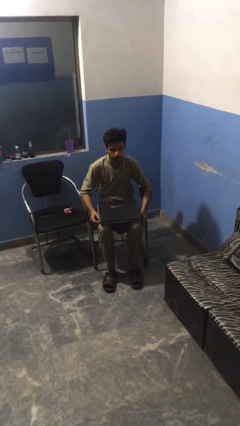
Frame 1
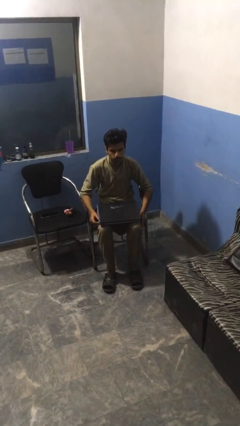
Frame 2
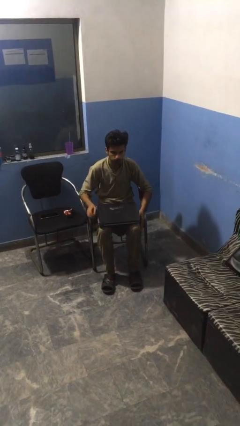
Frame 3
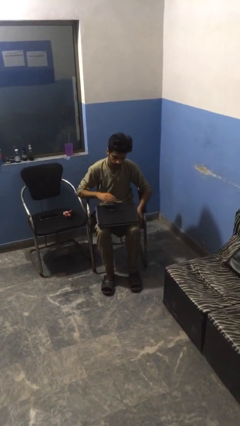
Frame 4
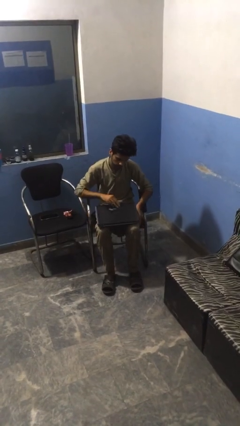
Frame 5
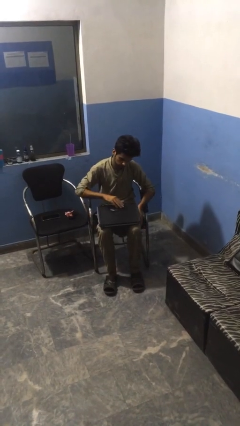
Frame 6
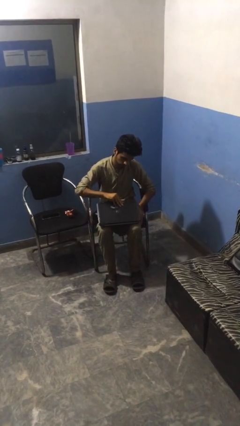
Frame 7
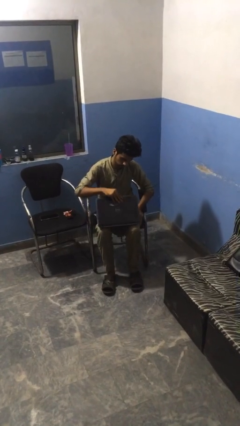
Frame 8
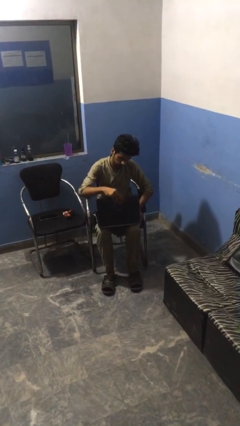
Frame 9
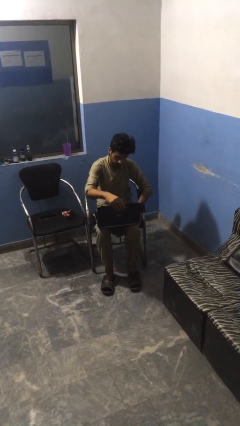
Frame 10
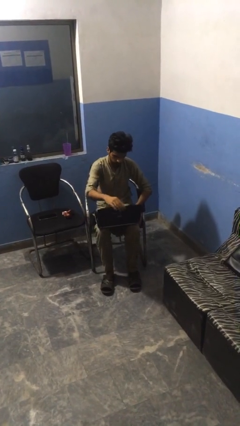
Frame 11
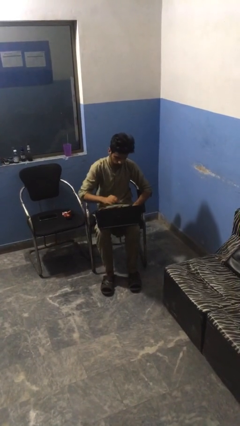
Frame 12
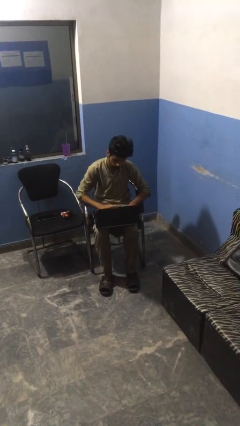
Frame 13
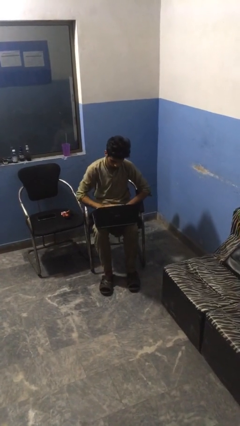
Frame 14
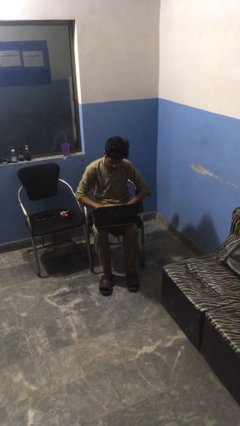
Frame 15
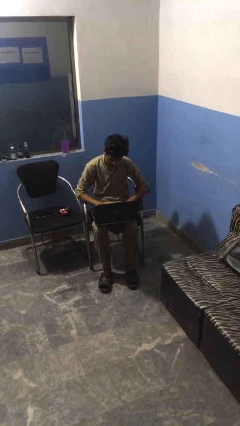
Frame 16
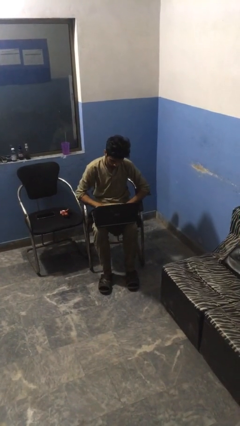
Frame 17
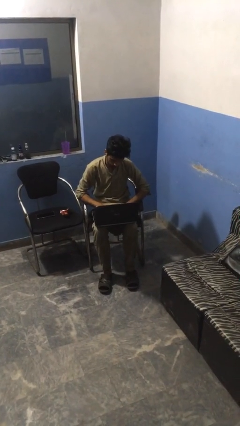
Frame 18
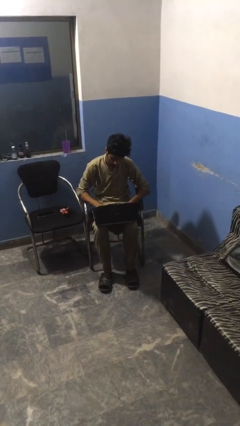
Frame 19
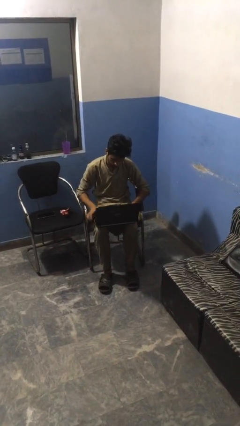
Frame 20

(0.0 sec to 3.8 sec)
person opens laptop

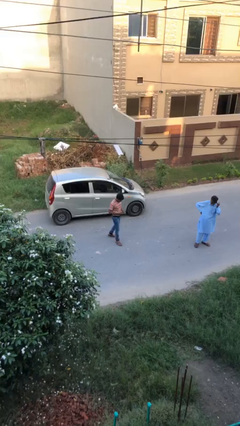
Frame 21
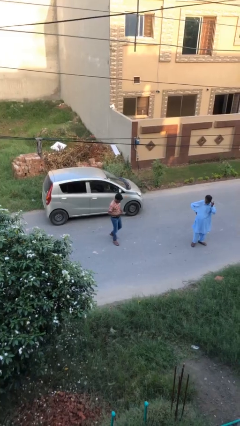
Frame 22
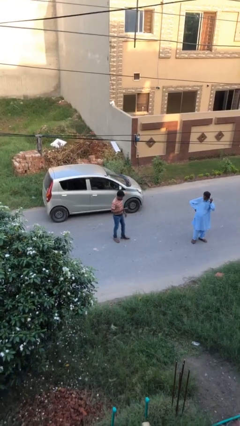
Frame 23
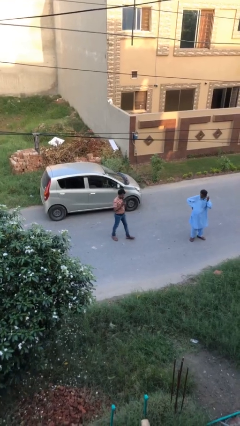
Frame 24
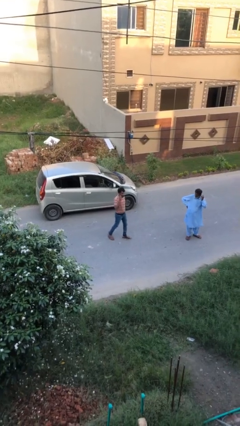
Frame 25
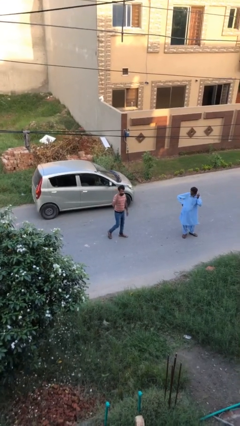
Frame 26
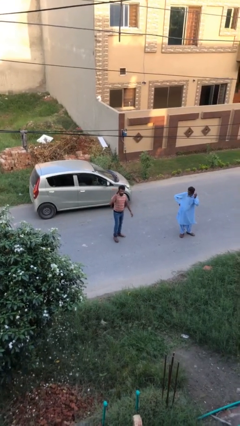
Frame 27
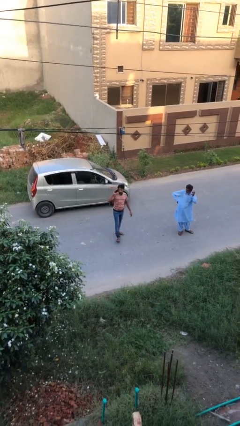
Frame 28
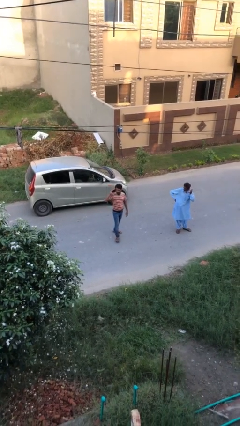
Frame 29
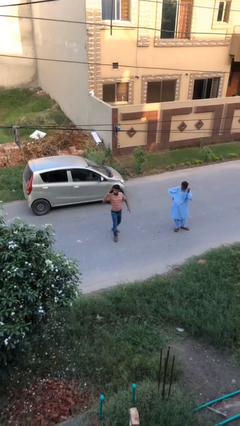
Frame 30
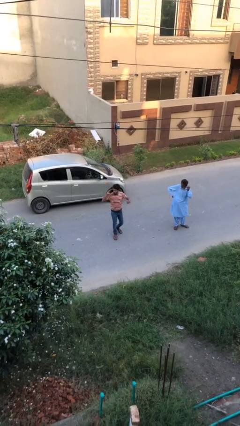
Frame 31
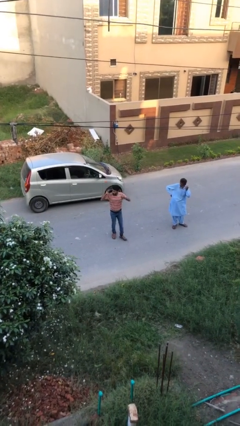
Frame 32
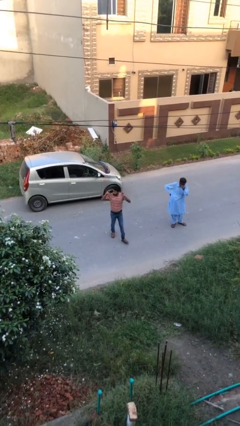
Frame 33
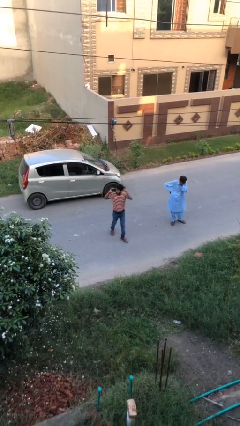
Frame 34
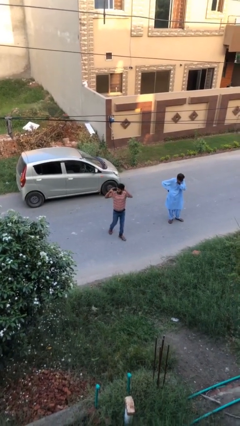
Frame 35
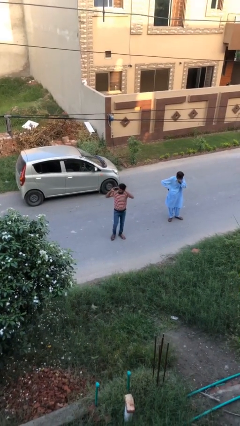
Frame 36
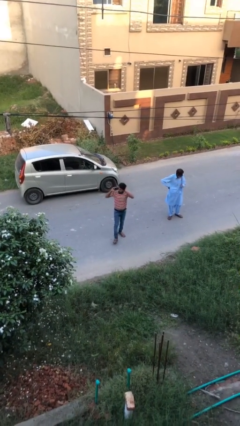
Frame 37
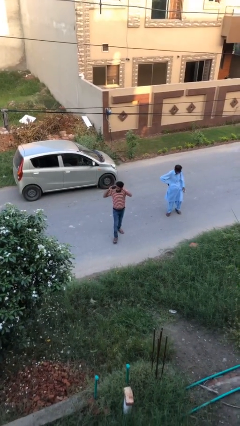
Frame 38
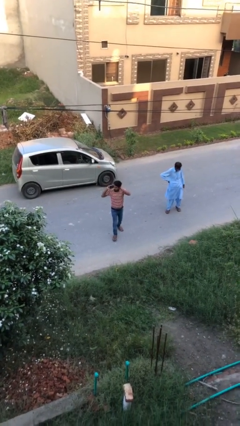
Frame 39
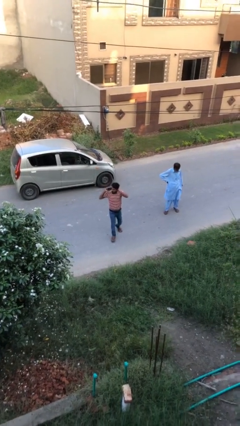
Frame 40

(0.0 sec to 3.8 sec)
person talks on phone

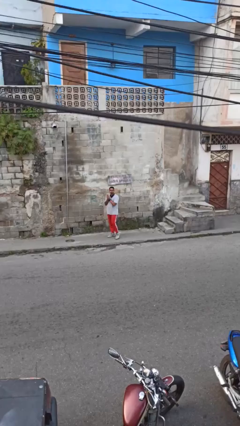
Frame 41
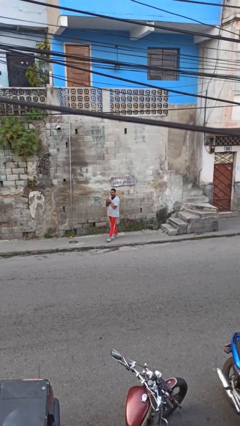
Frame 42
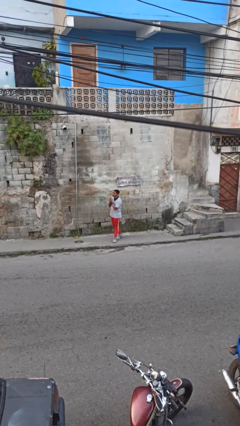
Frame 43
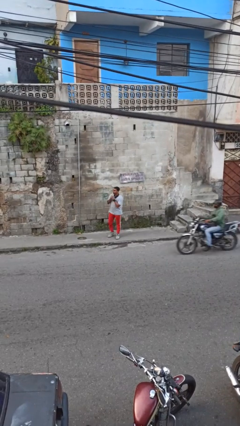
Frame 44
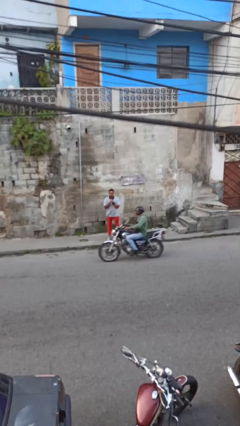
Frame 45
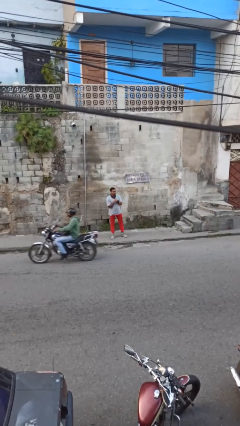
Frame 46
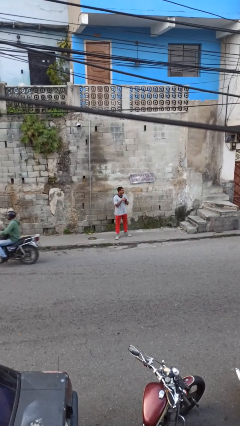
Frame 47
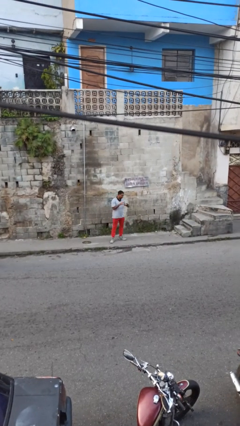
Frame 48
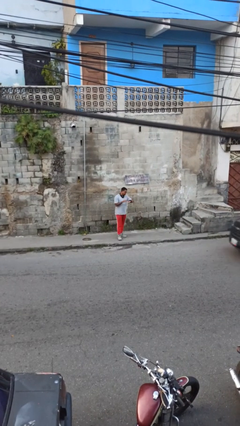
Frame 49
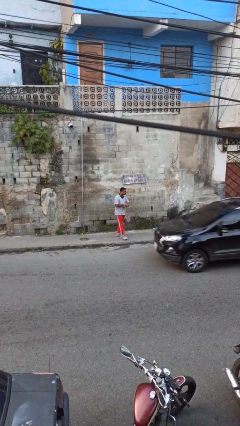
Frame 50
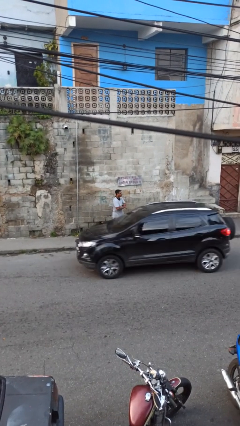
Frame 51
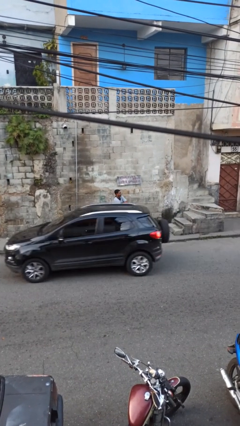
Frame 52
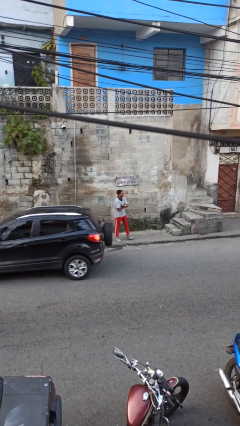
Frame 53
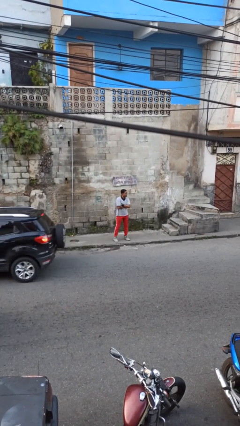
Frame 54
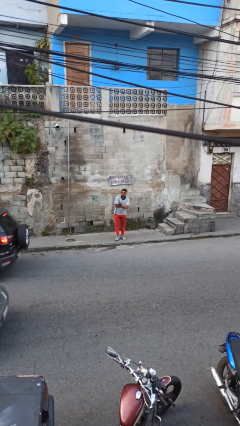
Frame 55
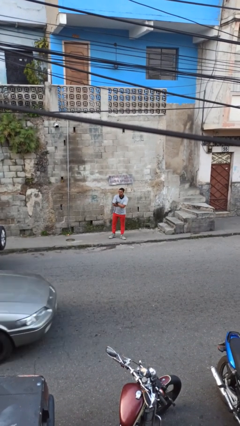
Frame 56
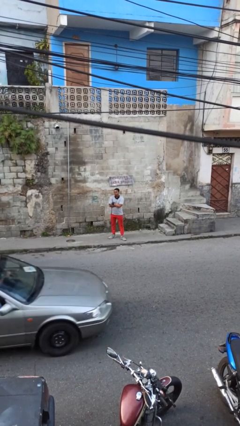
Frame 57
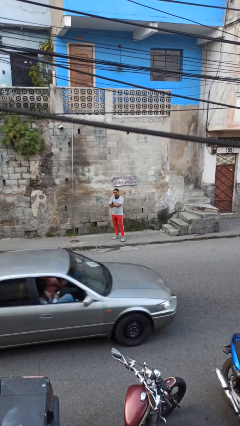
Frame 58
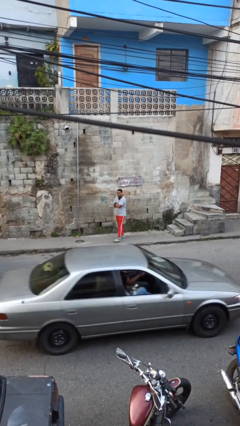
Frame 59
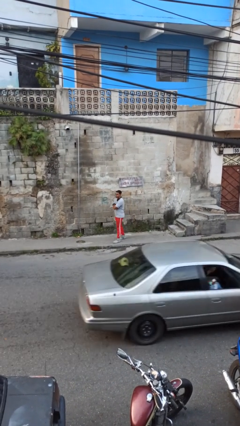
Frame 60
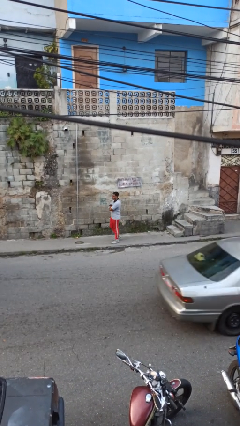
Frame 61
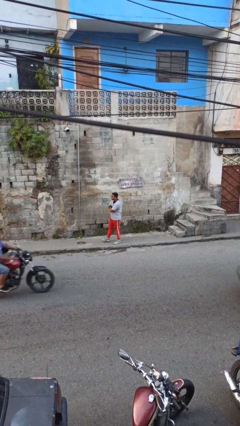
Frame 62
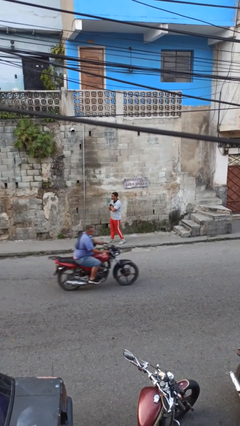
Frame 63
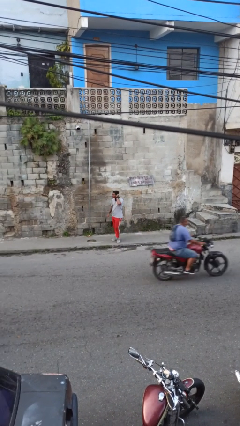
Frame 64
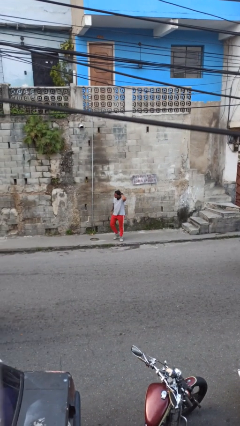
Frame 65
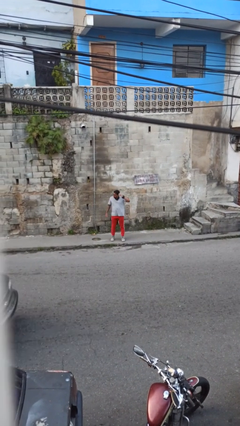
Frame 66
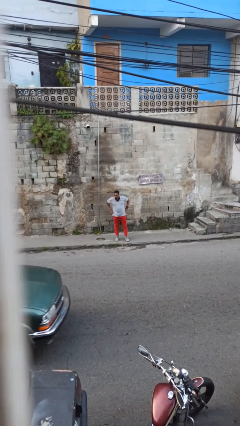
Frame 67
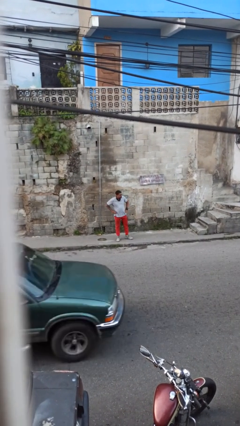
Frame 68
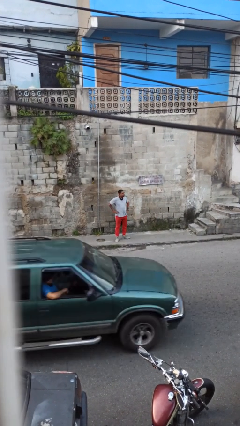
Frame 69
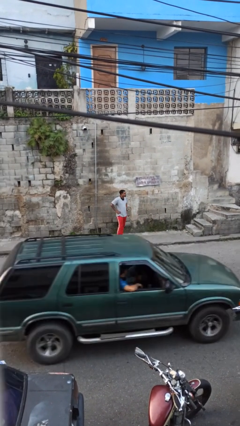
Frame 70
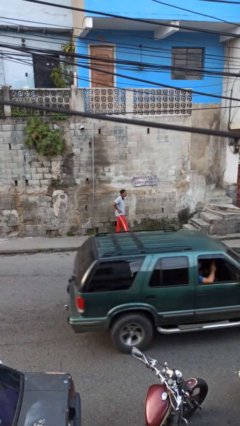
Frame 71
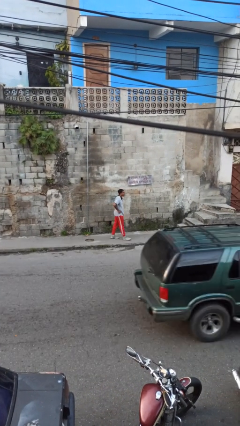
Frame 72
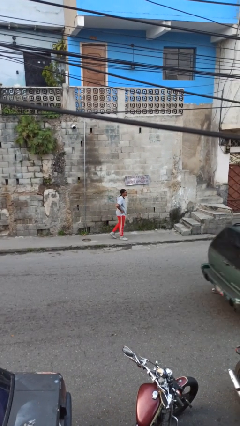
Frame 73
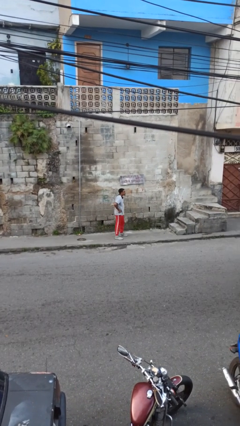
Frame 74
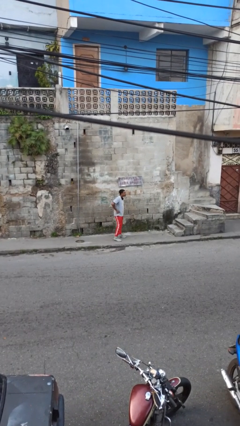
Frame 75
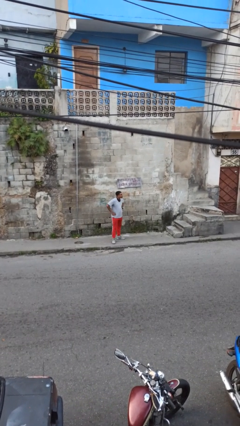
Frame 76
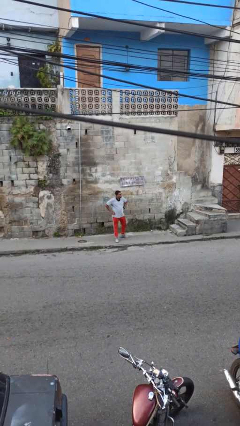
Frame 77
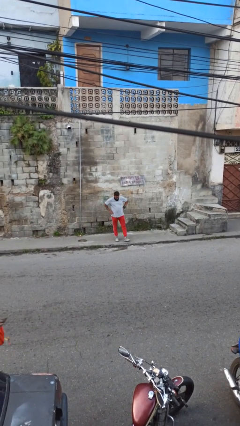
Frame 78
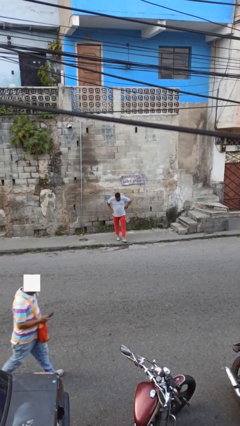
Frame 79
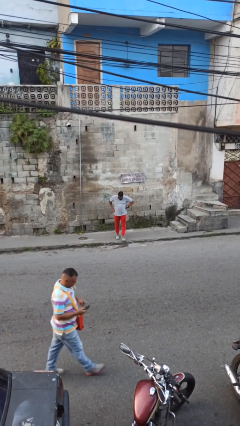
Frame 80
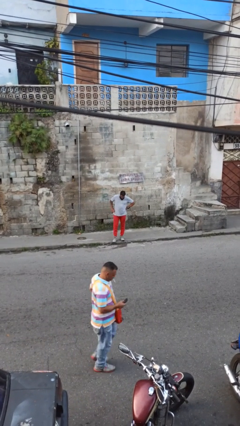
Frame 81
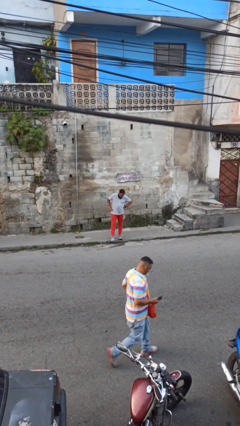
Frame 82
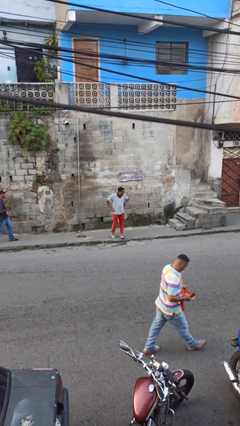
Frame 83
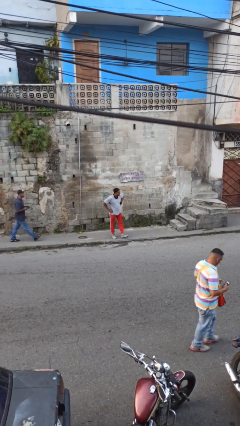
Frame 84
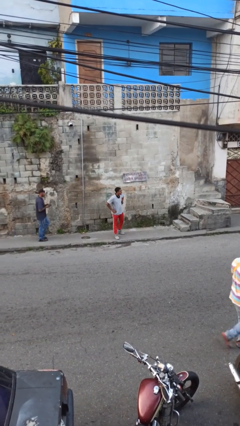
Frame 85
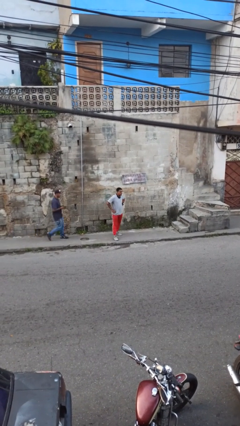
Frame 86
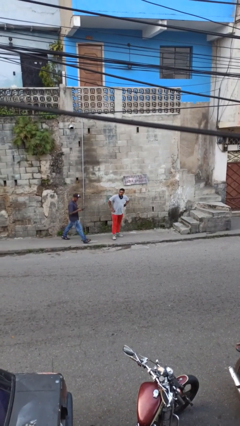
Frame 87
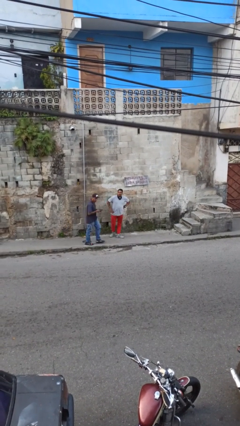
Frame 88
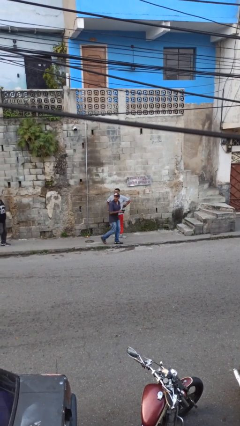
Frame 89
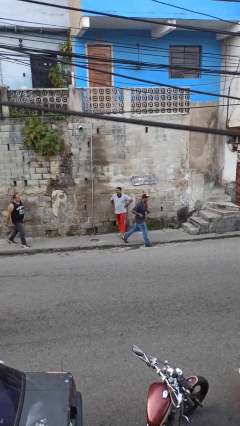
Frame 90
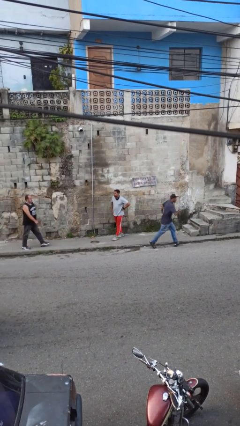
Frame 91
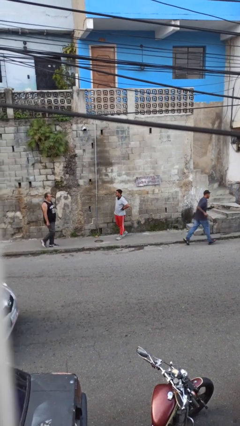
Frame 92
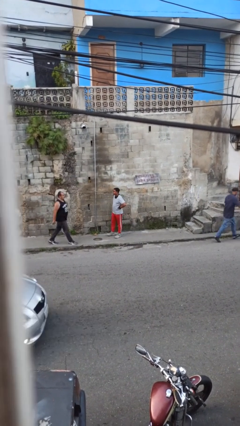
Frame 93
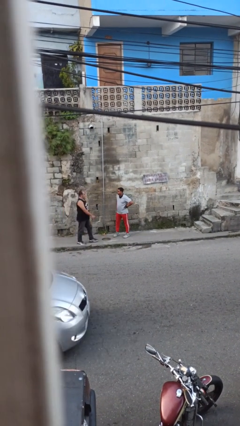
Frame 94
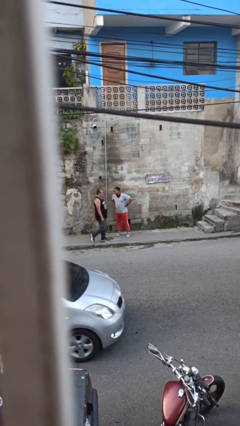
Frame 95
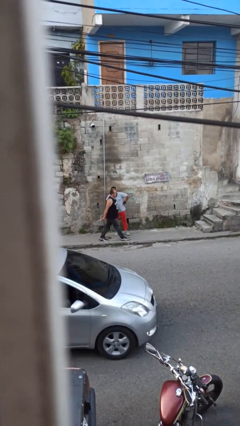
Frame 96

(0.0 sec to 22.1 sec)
person walks
